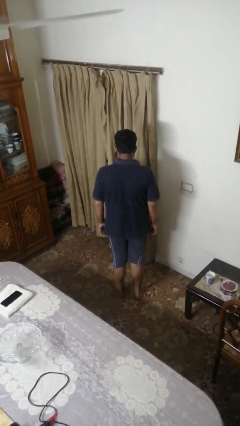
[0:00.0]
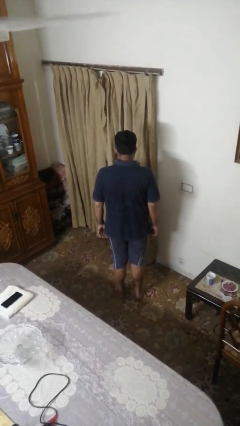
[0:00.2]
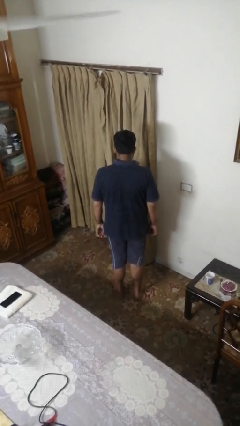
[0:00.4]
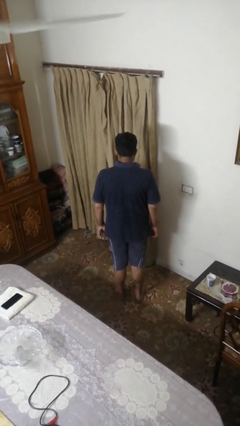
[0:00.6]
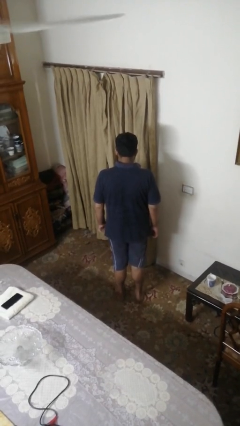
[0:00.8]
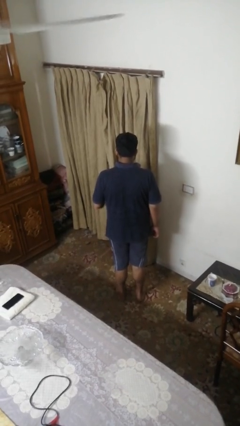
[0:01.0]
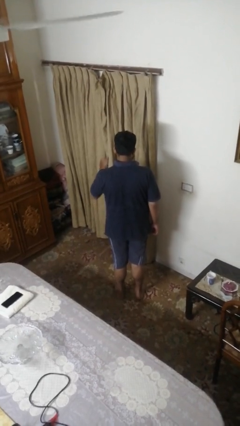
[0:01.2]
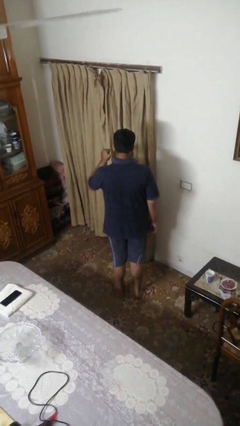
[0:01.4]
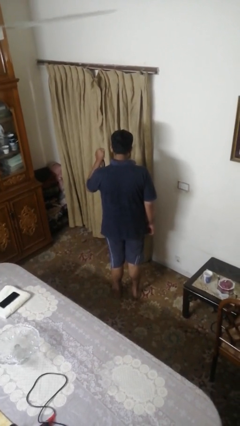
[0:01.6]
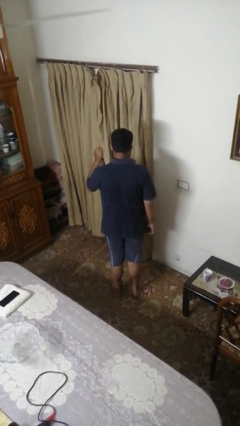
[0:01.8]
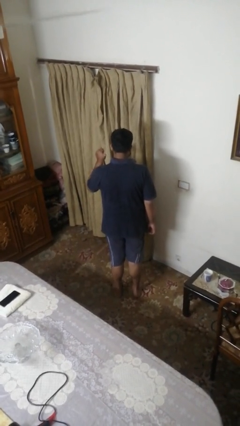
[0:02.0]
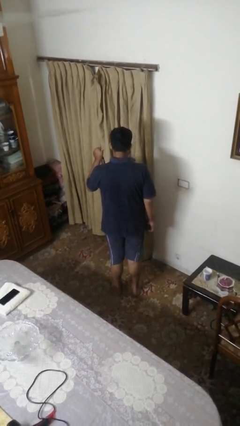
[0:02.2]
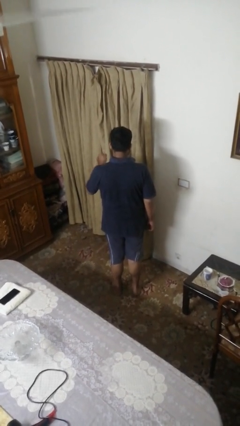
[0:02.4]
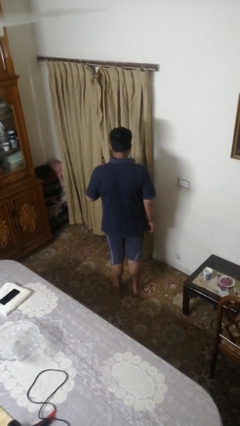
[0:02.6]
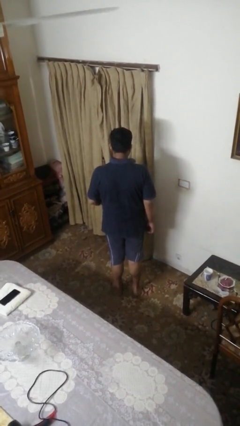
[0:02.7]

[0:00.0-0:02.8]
person gestures behind me

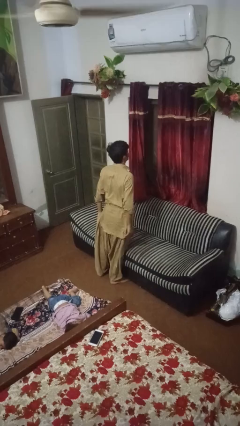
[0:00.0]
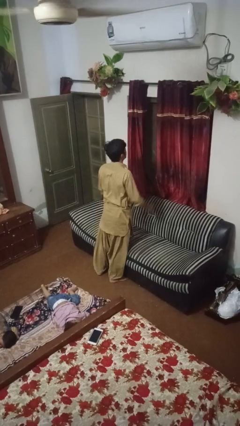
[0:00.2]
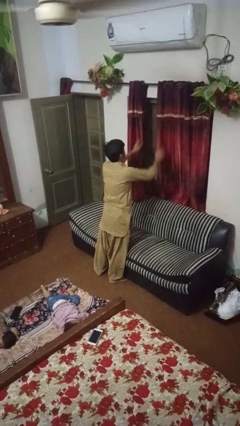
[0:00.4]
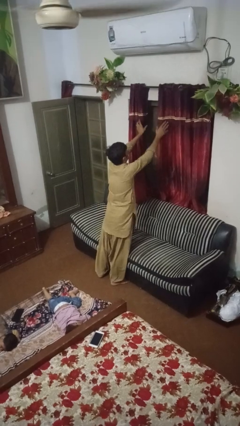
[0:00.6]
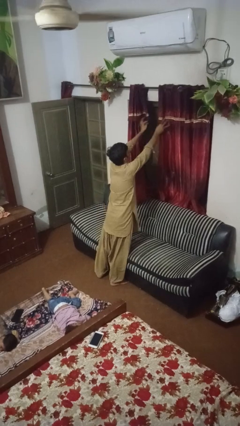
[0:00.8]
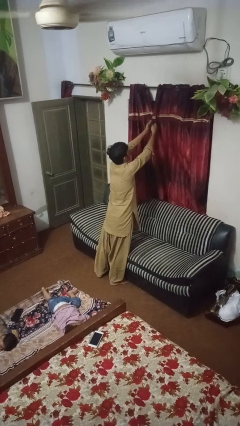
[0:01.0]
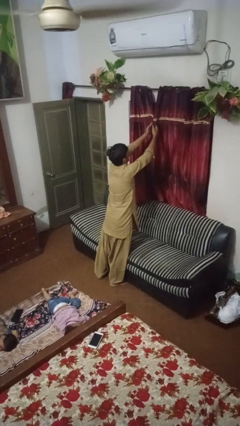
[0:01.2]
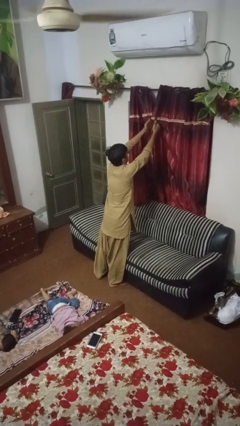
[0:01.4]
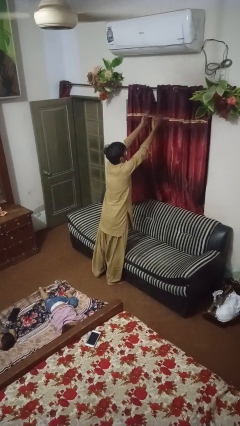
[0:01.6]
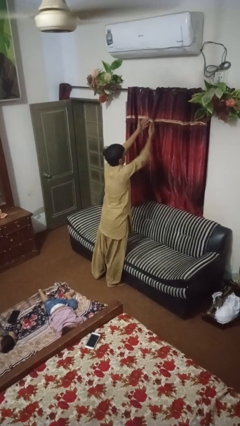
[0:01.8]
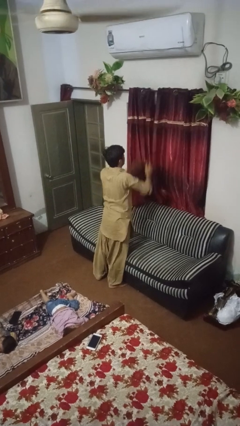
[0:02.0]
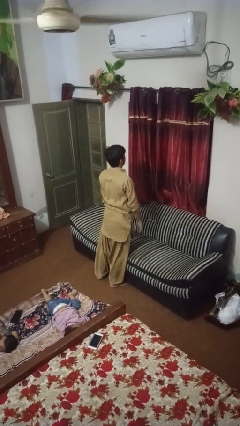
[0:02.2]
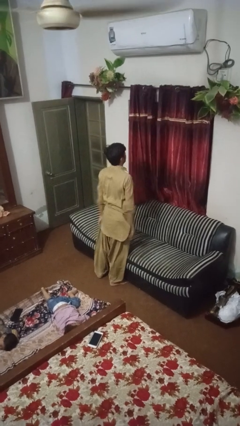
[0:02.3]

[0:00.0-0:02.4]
person closes curtains

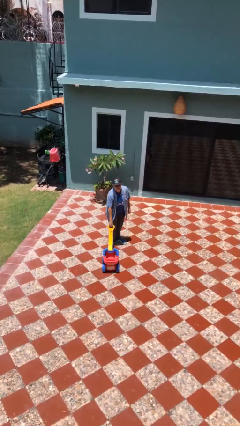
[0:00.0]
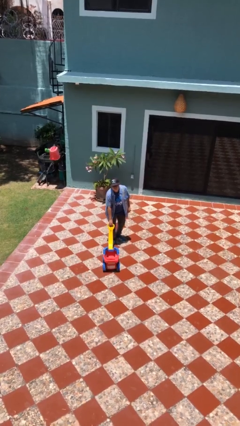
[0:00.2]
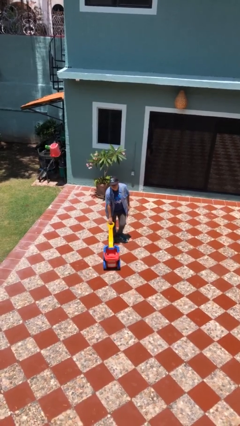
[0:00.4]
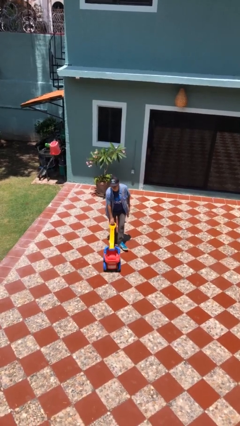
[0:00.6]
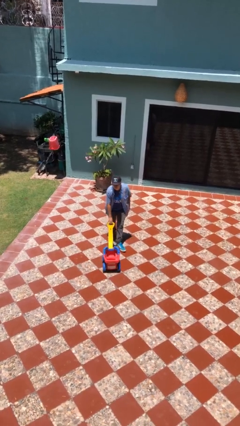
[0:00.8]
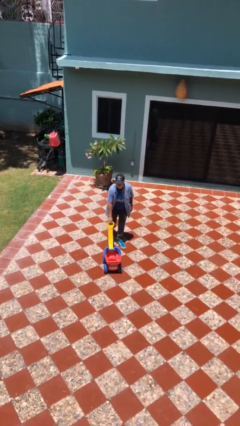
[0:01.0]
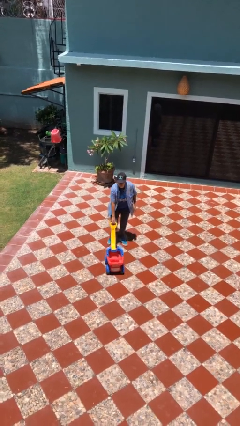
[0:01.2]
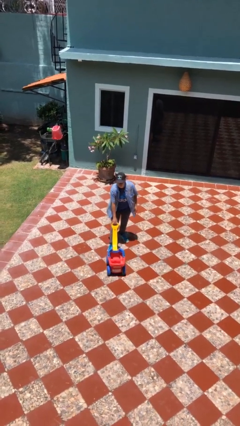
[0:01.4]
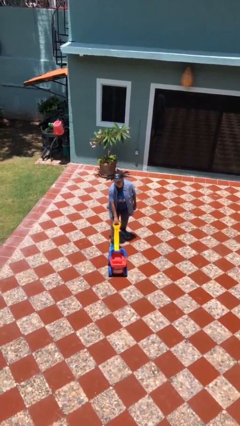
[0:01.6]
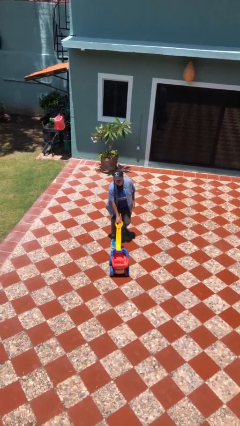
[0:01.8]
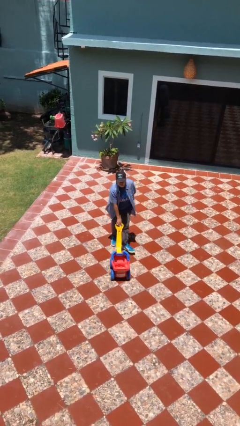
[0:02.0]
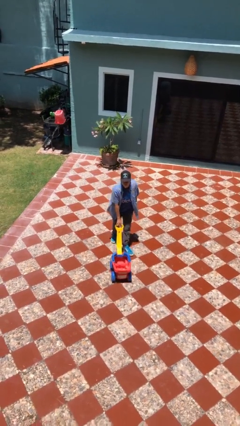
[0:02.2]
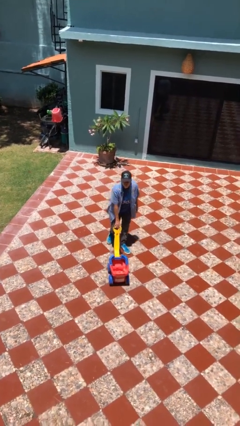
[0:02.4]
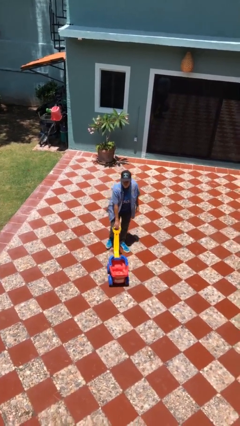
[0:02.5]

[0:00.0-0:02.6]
person pushes wheeled cart

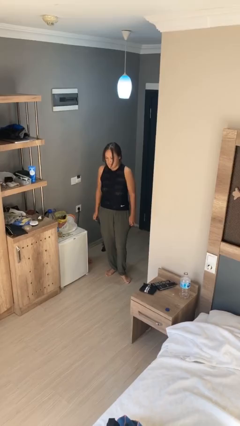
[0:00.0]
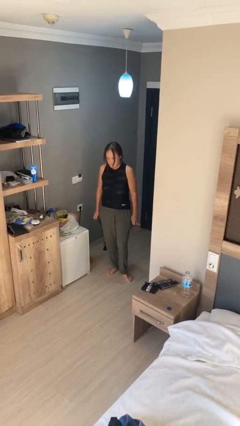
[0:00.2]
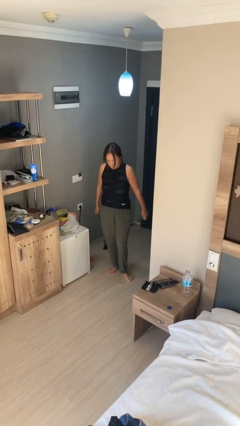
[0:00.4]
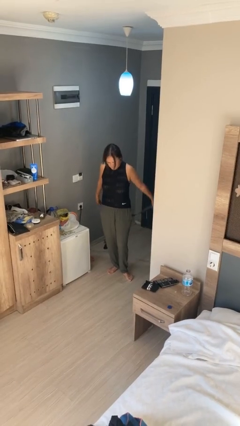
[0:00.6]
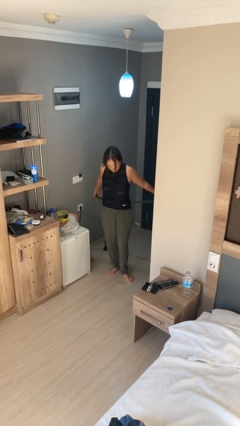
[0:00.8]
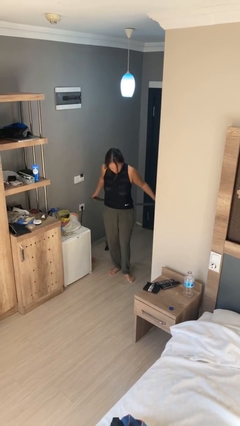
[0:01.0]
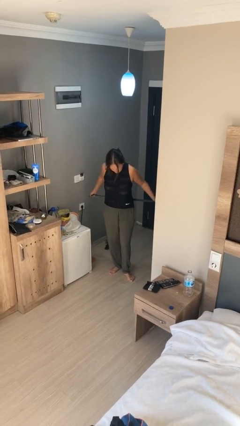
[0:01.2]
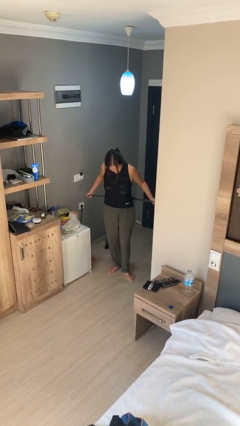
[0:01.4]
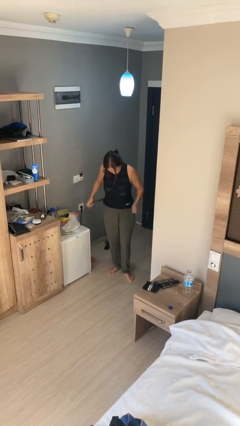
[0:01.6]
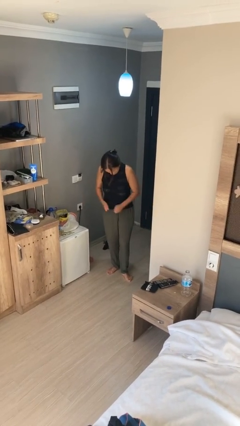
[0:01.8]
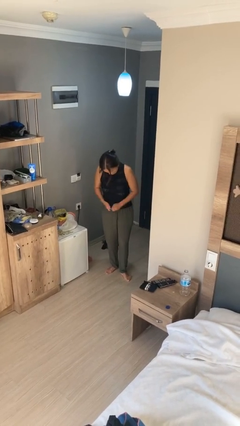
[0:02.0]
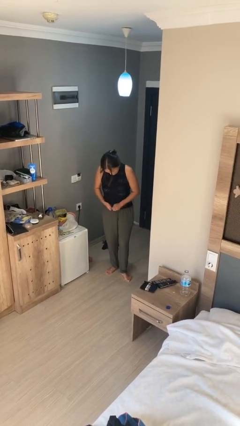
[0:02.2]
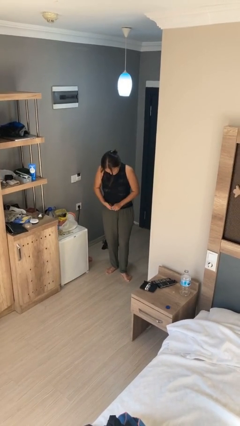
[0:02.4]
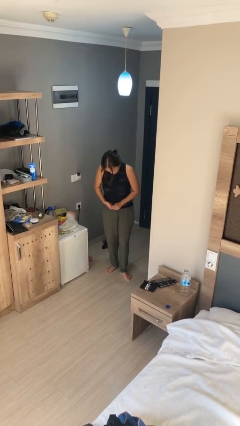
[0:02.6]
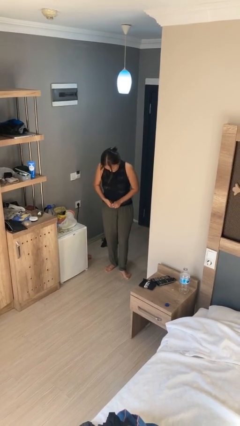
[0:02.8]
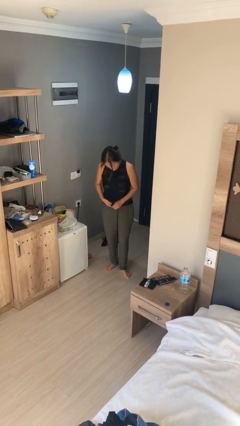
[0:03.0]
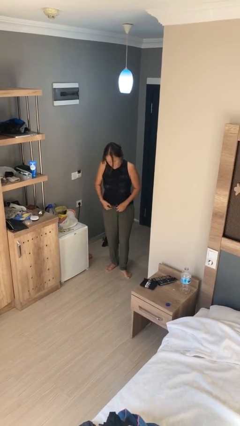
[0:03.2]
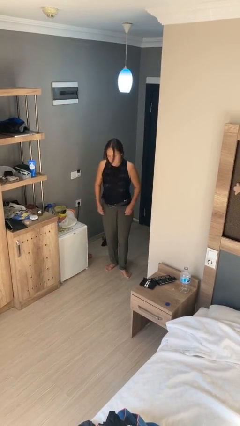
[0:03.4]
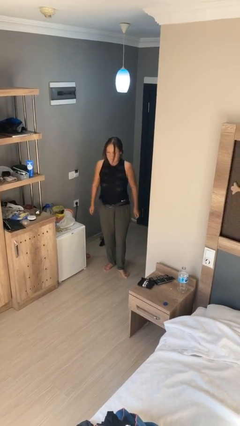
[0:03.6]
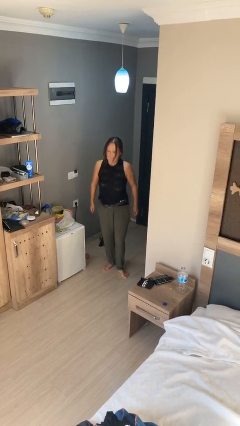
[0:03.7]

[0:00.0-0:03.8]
person puts on belt

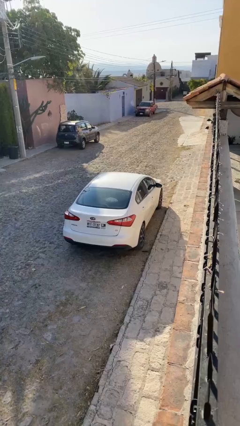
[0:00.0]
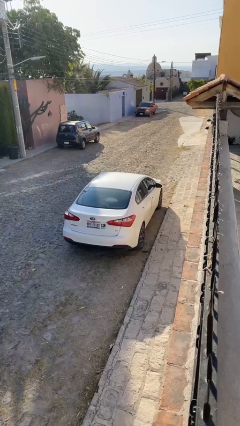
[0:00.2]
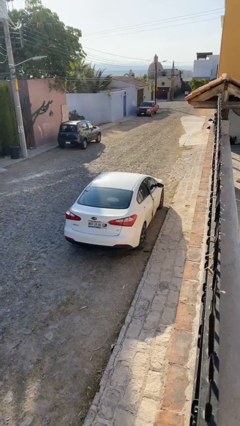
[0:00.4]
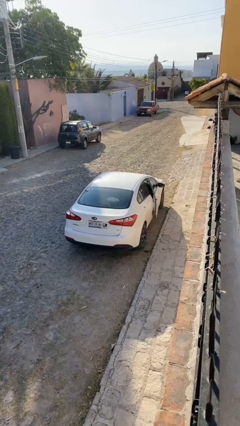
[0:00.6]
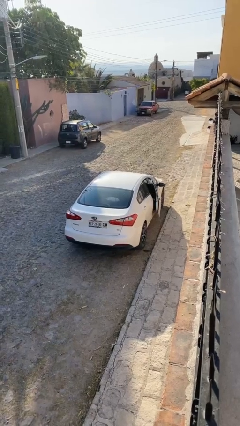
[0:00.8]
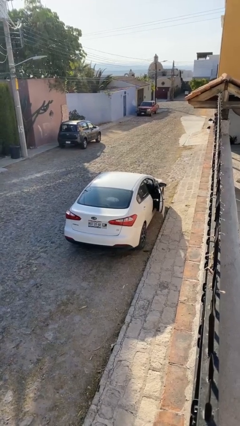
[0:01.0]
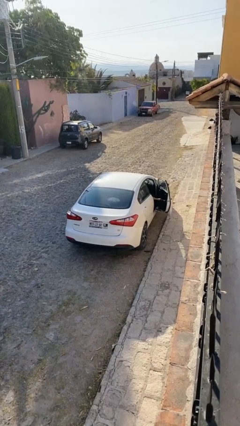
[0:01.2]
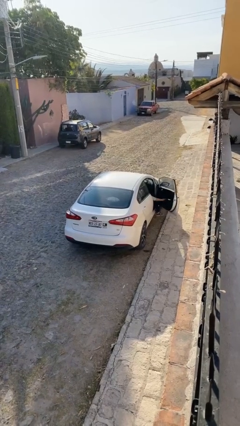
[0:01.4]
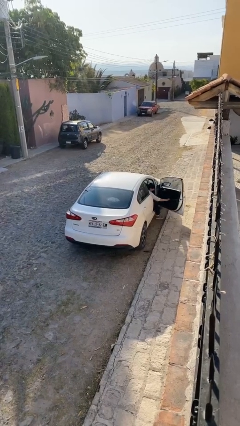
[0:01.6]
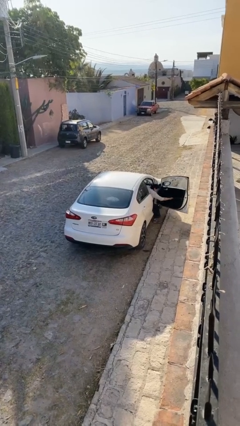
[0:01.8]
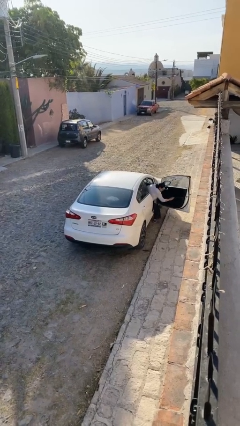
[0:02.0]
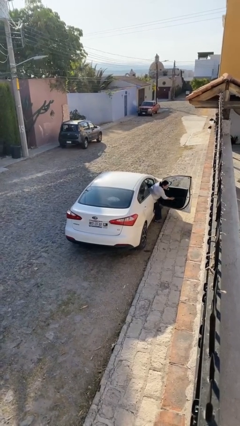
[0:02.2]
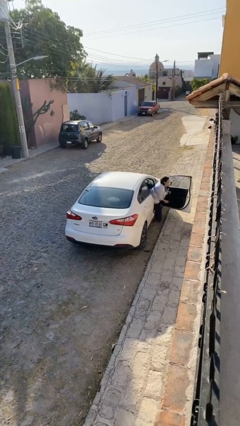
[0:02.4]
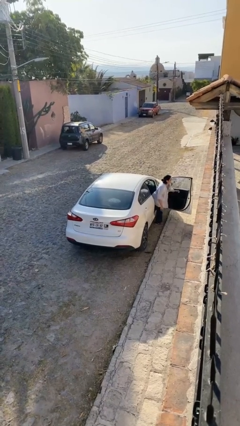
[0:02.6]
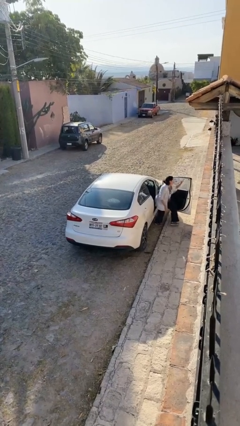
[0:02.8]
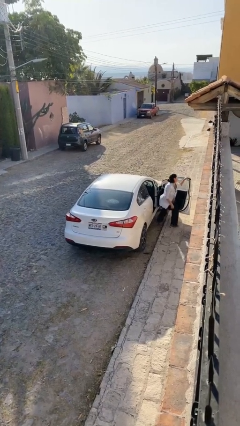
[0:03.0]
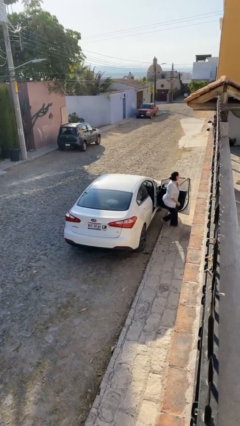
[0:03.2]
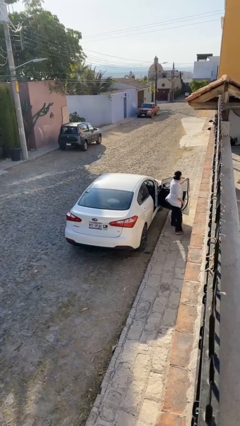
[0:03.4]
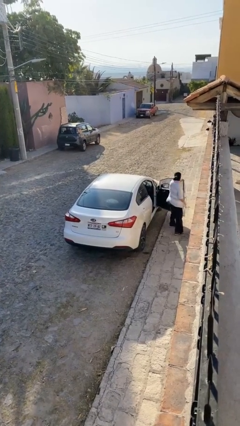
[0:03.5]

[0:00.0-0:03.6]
car drops off person

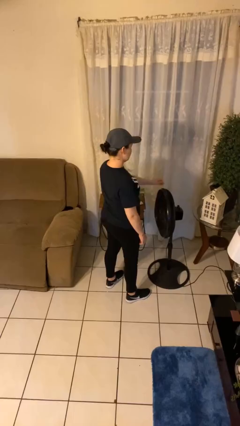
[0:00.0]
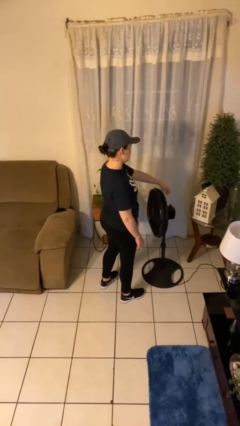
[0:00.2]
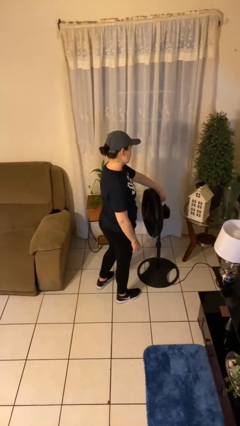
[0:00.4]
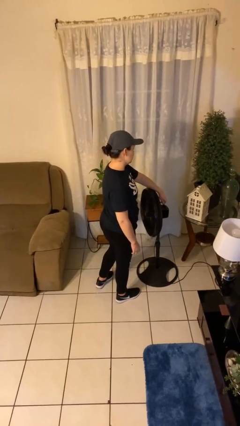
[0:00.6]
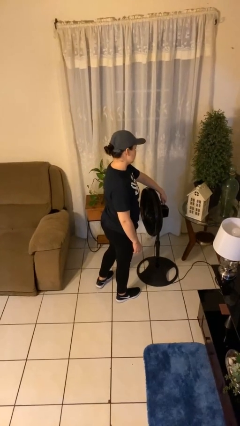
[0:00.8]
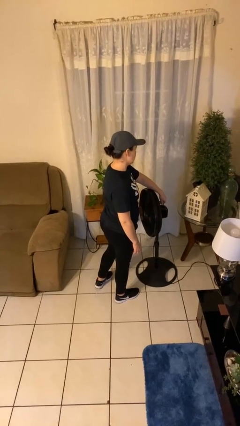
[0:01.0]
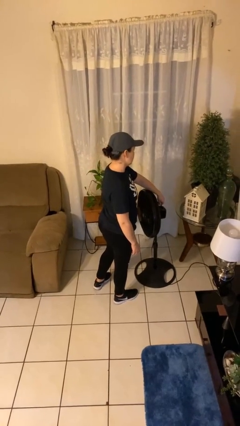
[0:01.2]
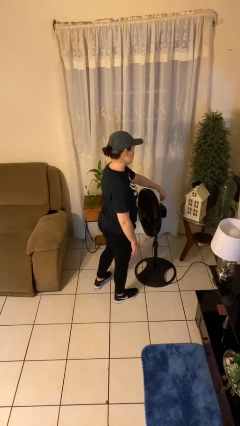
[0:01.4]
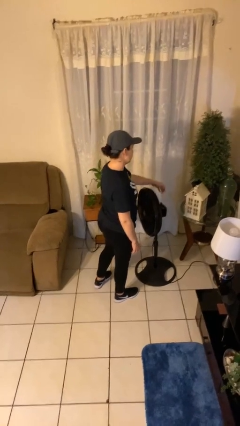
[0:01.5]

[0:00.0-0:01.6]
person turns on fan

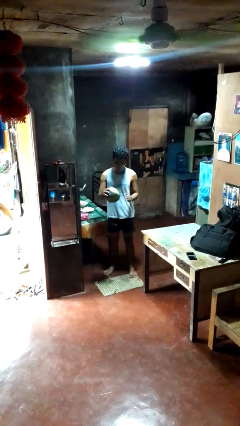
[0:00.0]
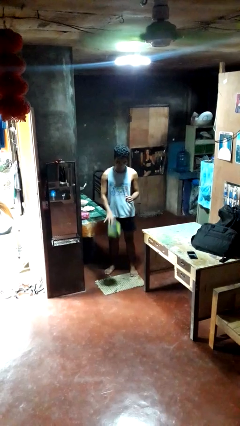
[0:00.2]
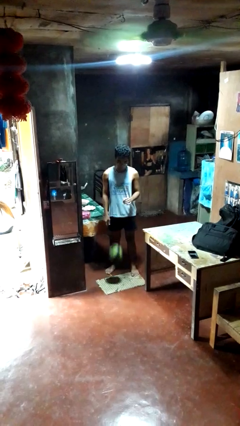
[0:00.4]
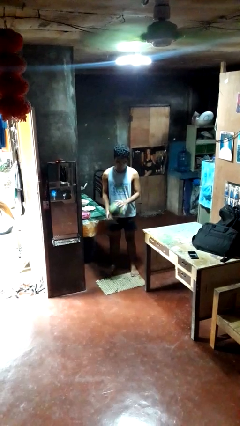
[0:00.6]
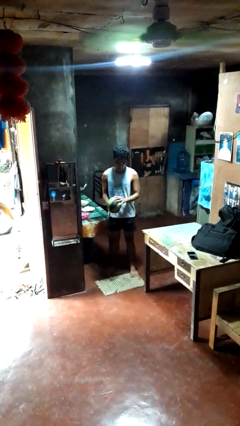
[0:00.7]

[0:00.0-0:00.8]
person bounces ball on floor
